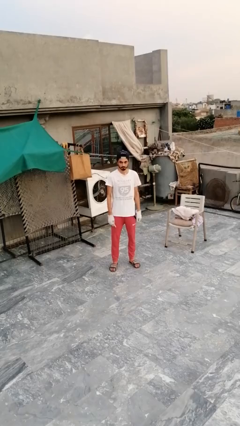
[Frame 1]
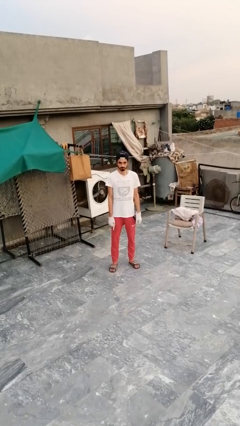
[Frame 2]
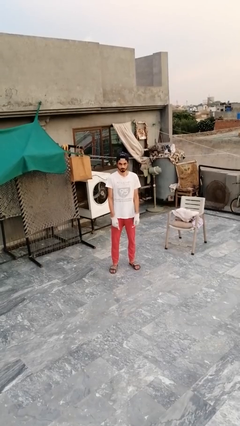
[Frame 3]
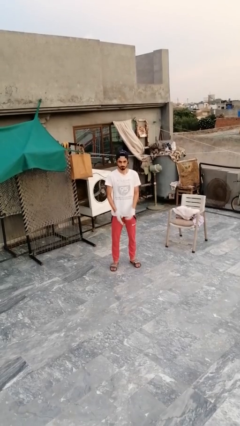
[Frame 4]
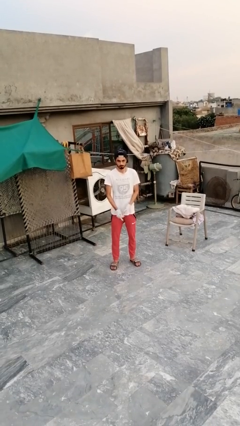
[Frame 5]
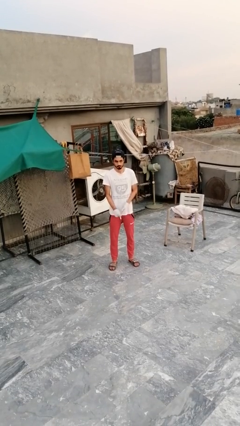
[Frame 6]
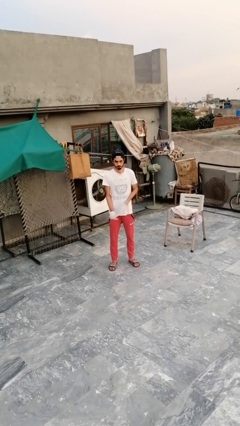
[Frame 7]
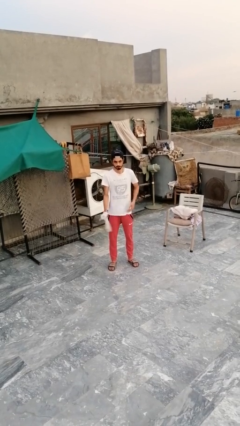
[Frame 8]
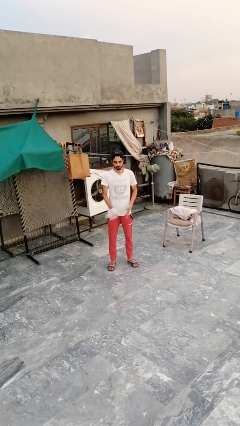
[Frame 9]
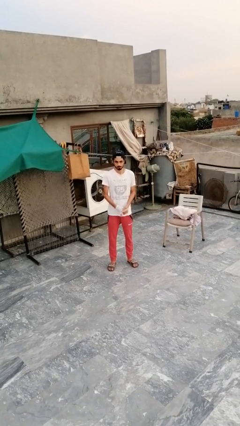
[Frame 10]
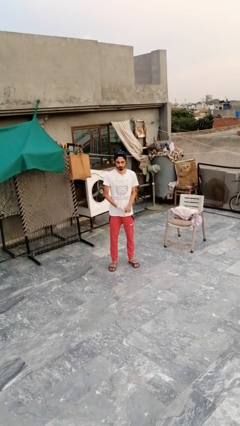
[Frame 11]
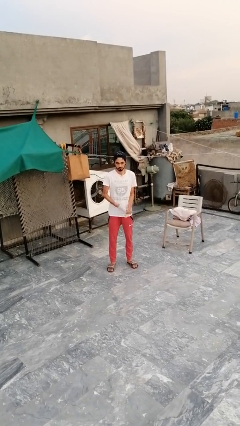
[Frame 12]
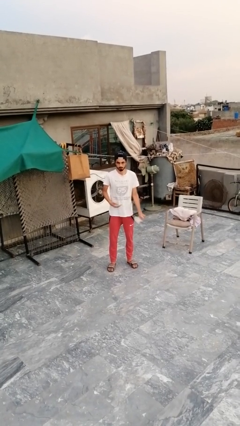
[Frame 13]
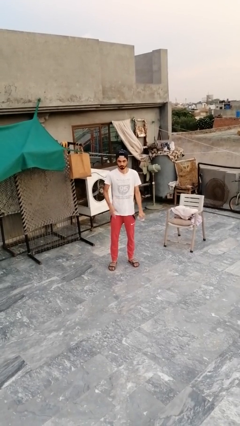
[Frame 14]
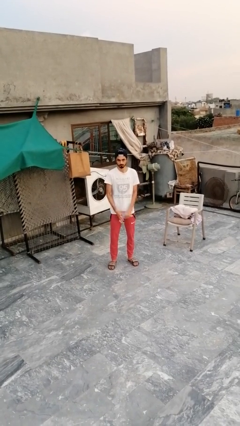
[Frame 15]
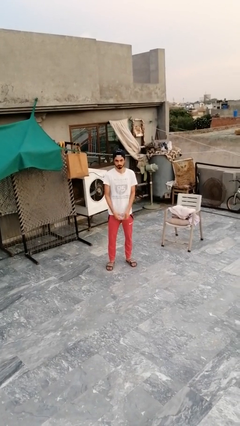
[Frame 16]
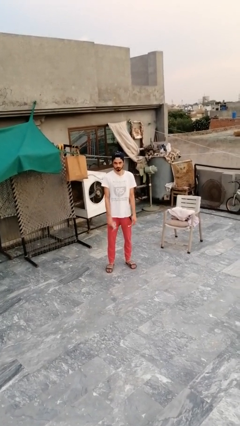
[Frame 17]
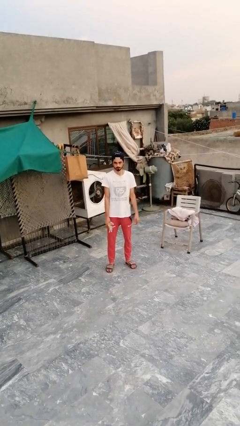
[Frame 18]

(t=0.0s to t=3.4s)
person takes off gloves

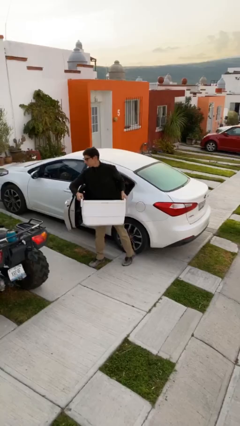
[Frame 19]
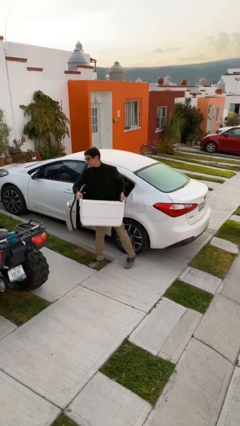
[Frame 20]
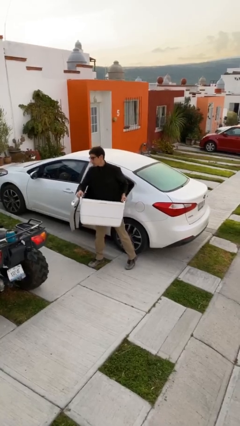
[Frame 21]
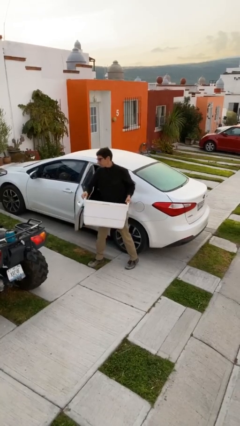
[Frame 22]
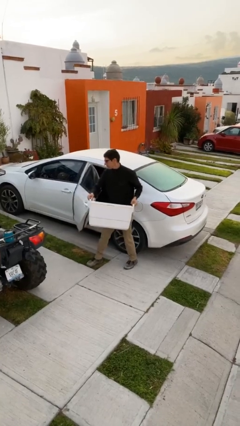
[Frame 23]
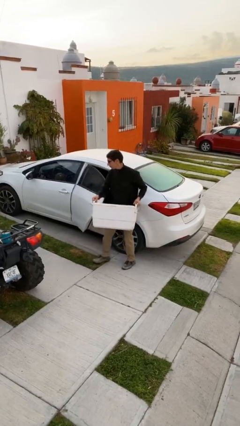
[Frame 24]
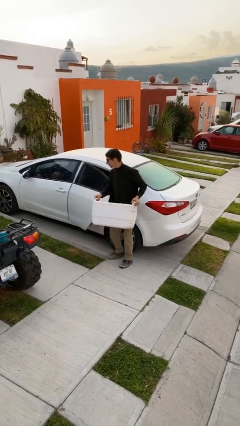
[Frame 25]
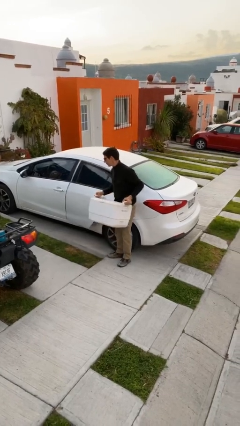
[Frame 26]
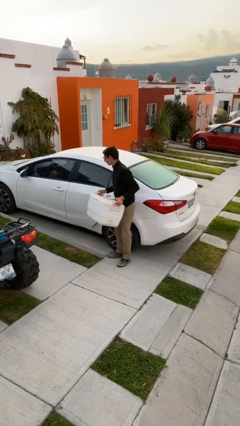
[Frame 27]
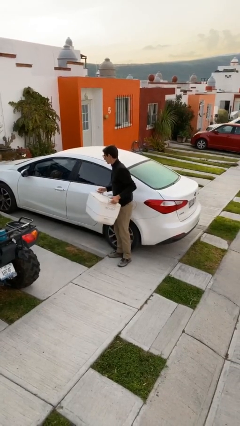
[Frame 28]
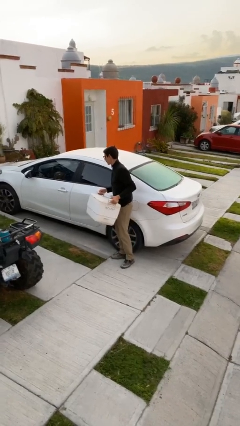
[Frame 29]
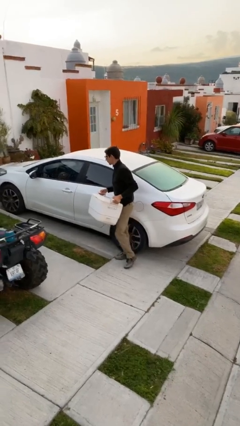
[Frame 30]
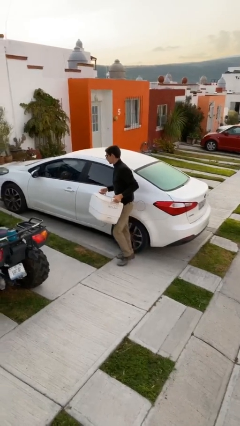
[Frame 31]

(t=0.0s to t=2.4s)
person closes car door

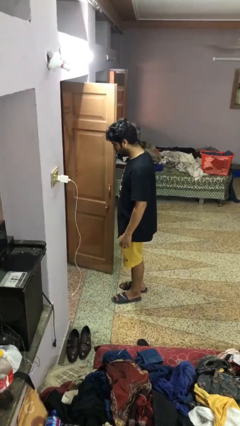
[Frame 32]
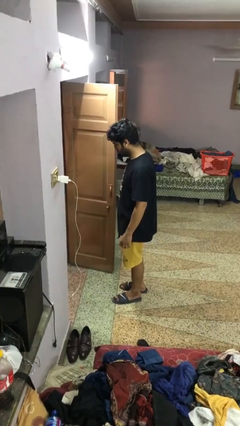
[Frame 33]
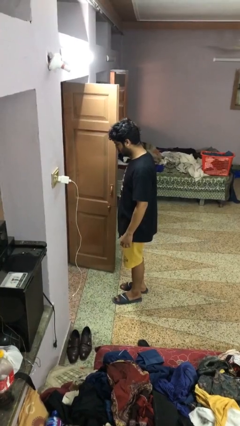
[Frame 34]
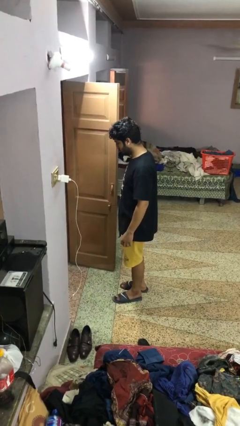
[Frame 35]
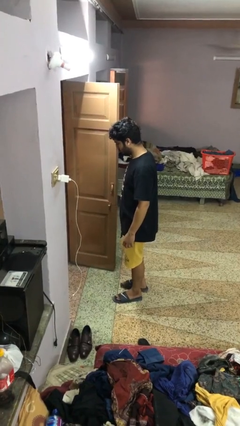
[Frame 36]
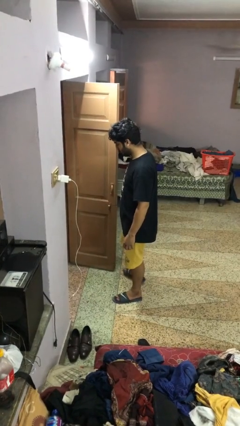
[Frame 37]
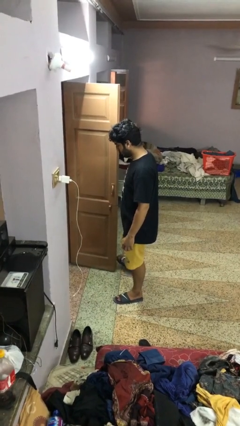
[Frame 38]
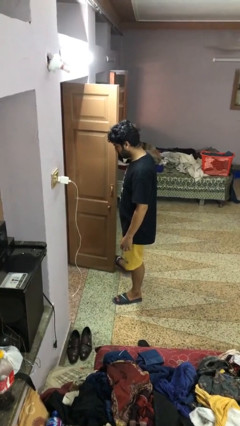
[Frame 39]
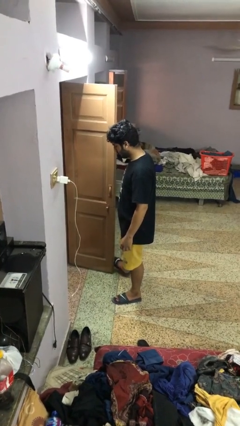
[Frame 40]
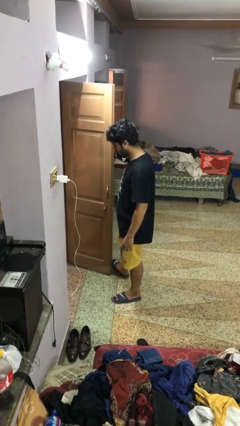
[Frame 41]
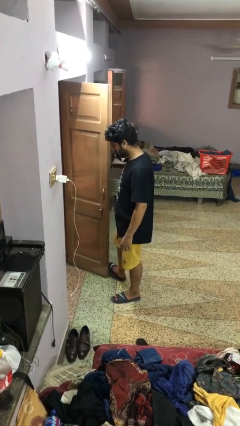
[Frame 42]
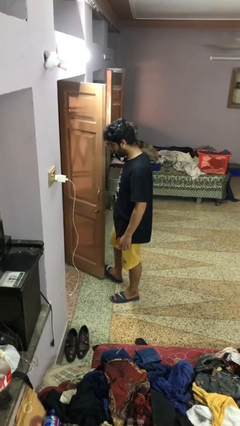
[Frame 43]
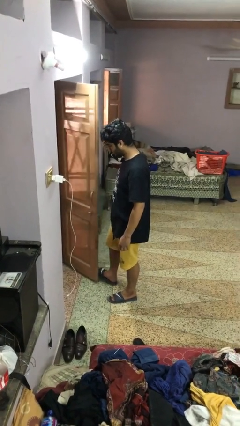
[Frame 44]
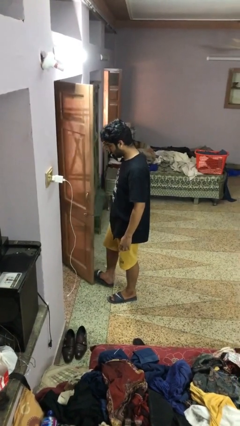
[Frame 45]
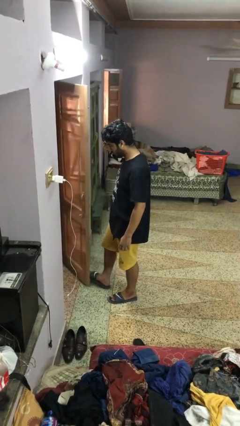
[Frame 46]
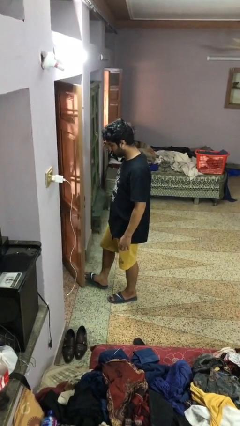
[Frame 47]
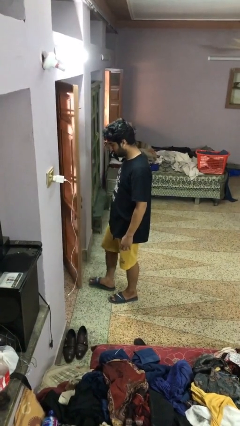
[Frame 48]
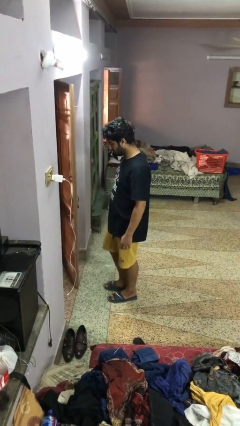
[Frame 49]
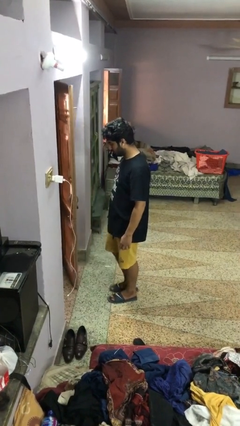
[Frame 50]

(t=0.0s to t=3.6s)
person closes door with foot

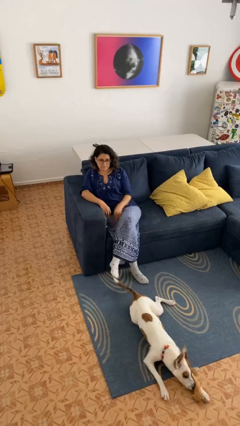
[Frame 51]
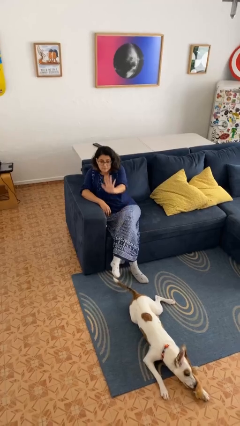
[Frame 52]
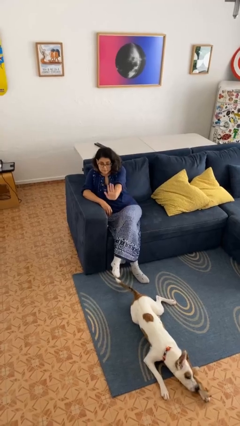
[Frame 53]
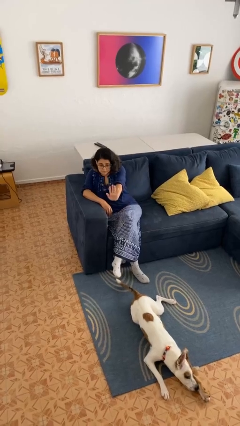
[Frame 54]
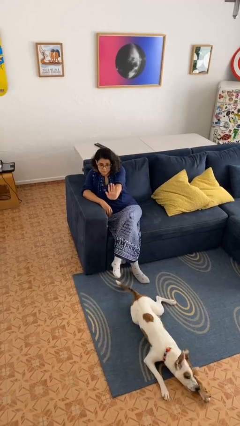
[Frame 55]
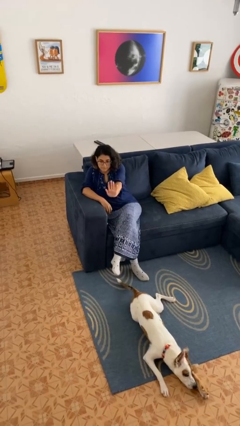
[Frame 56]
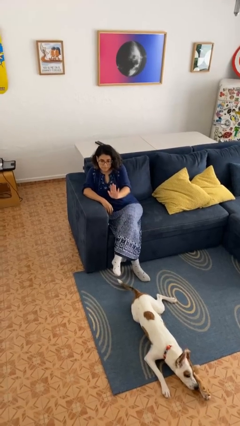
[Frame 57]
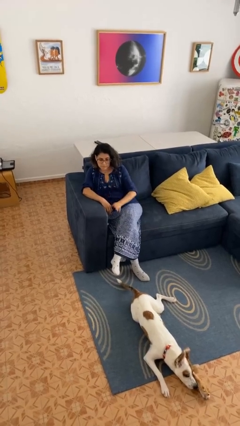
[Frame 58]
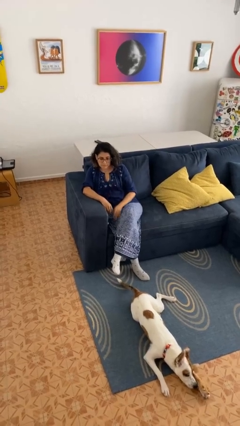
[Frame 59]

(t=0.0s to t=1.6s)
person gestures stop

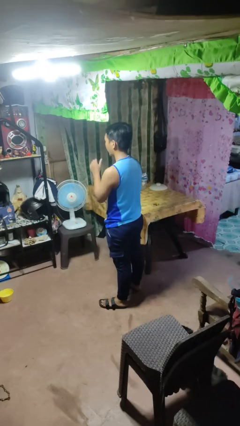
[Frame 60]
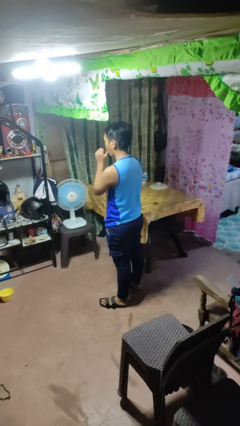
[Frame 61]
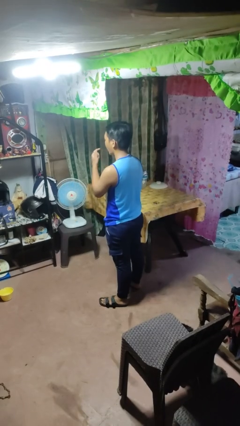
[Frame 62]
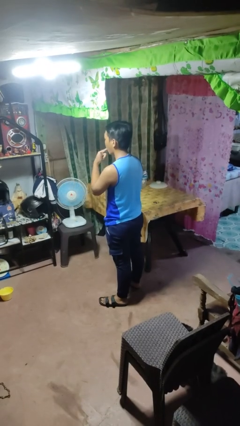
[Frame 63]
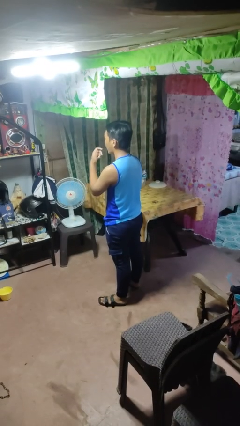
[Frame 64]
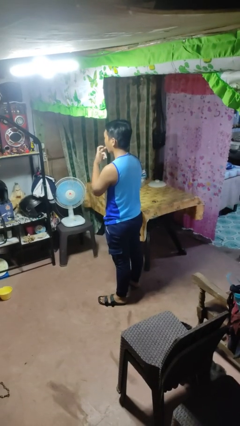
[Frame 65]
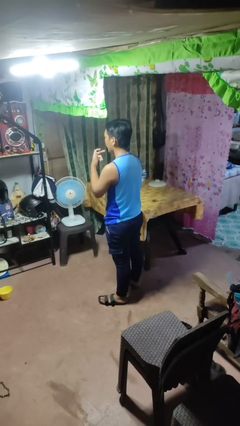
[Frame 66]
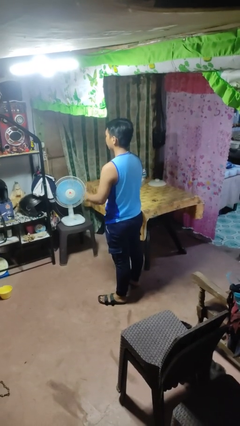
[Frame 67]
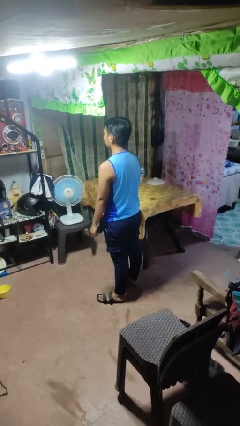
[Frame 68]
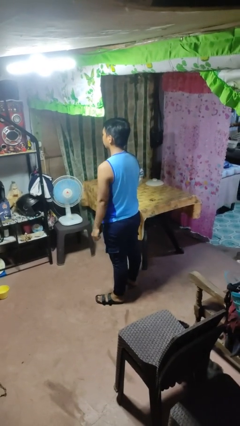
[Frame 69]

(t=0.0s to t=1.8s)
person licks fingers

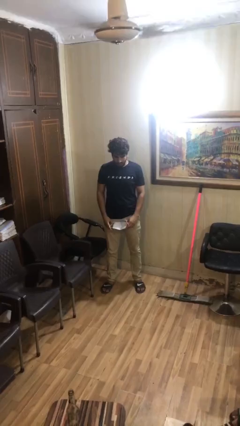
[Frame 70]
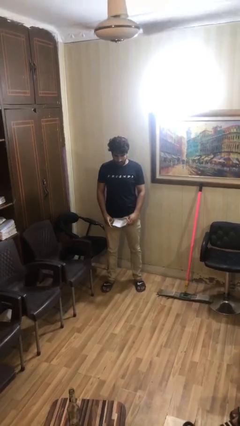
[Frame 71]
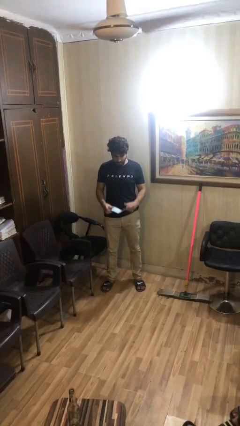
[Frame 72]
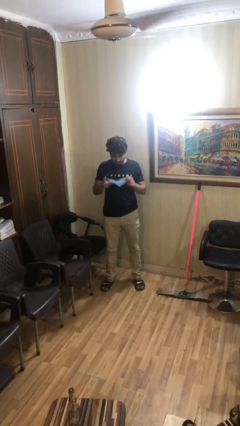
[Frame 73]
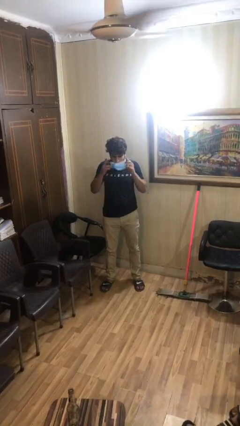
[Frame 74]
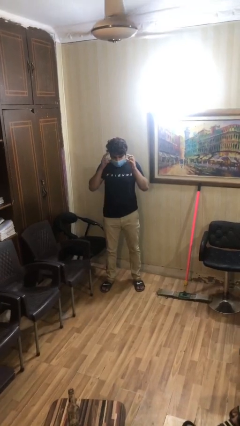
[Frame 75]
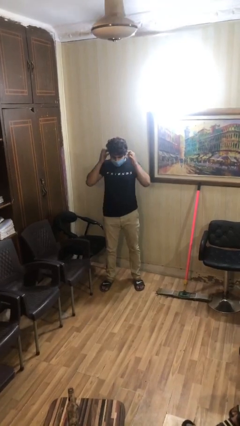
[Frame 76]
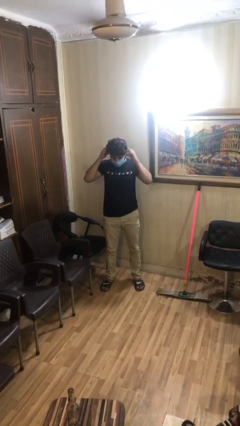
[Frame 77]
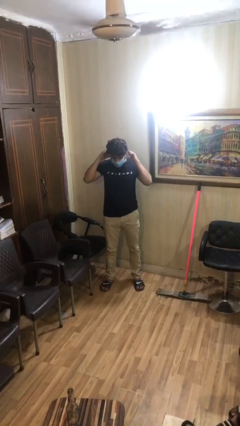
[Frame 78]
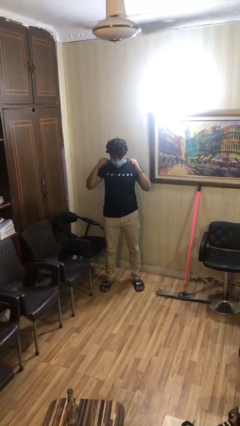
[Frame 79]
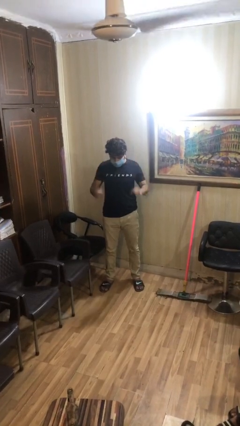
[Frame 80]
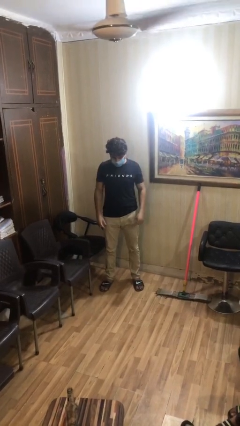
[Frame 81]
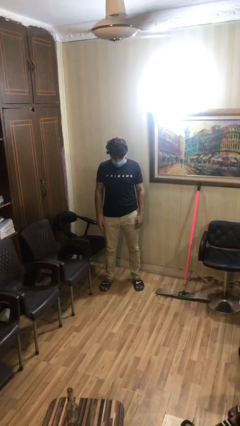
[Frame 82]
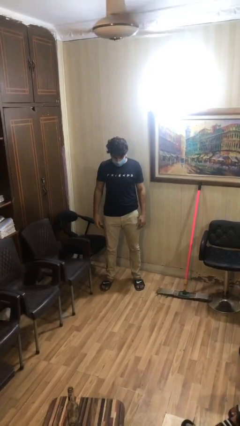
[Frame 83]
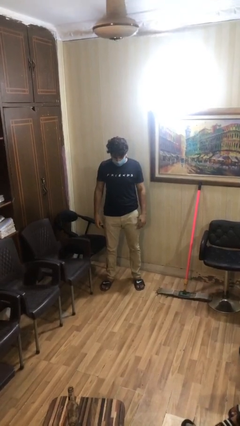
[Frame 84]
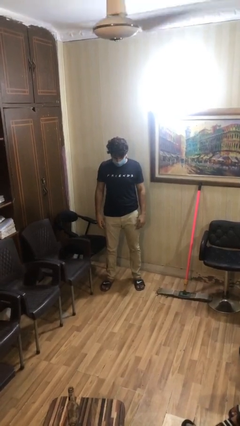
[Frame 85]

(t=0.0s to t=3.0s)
person puts on facemask

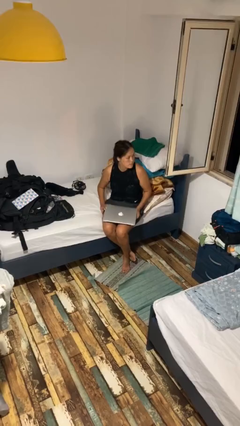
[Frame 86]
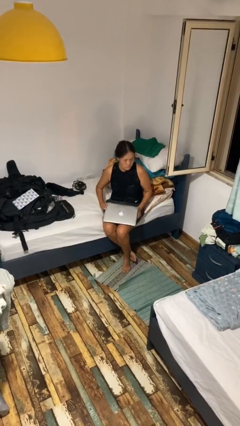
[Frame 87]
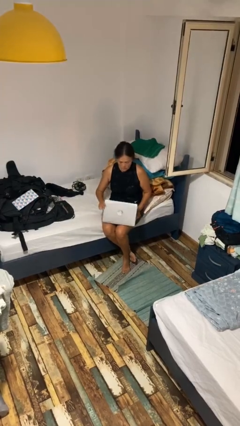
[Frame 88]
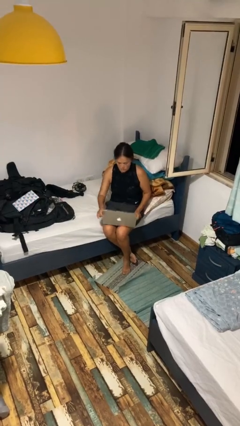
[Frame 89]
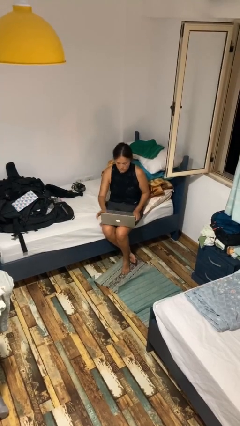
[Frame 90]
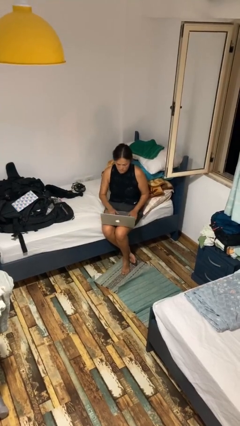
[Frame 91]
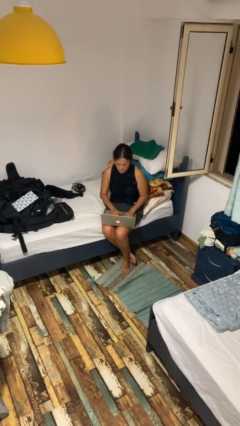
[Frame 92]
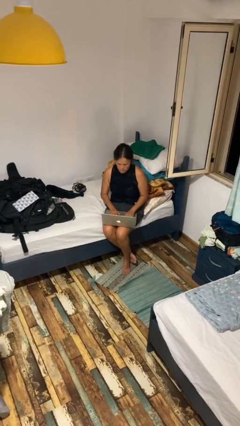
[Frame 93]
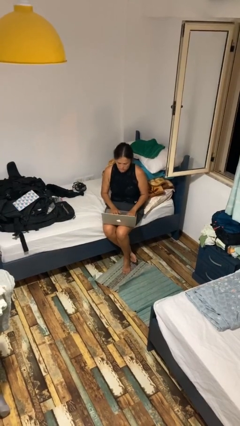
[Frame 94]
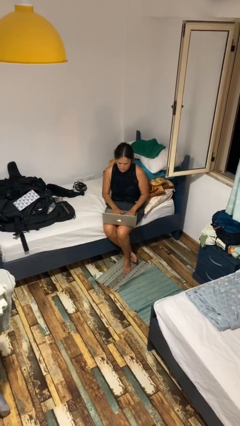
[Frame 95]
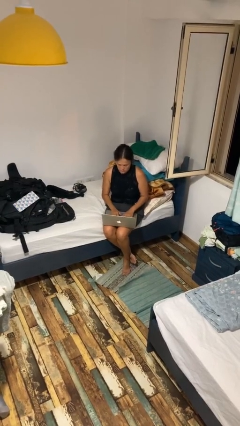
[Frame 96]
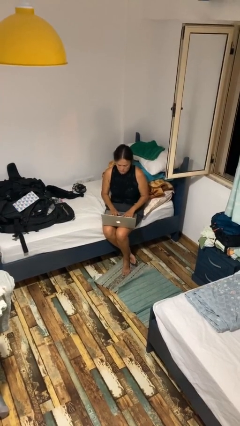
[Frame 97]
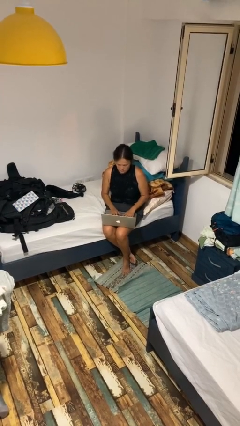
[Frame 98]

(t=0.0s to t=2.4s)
person opens laptop
